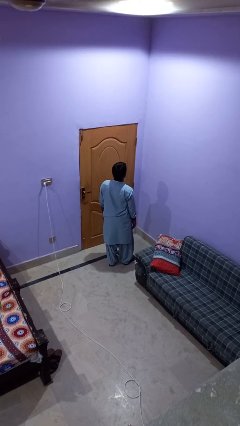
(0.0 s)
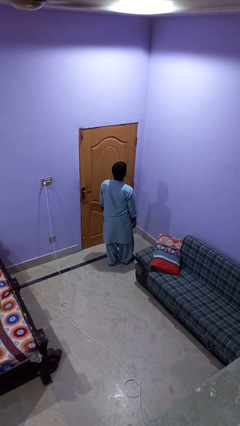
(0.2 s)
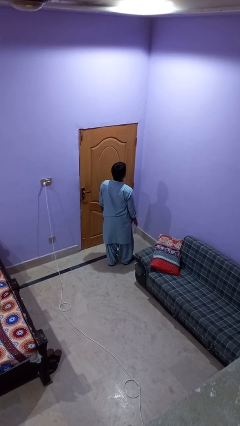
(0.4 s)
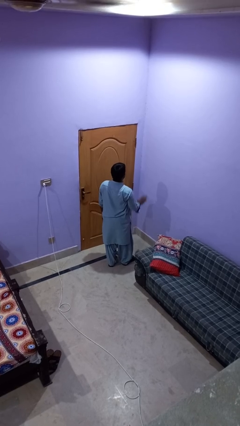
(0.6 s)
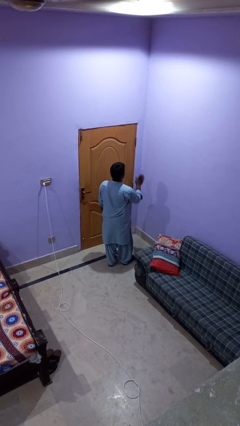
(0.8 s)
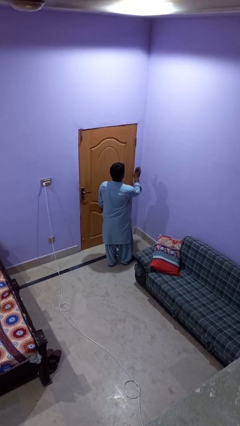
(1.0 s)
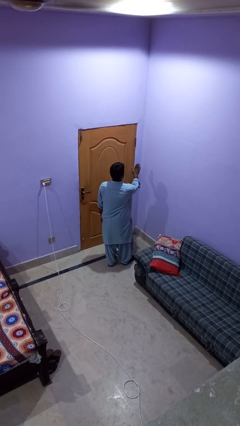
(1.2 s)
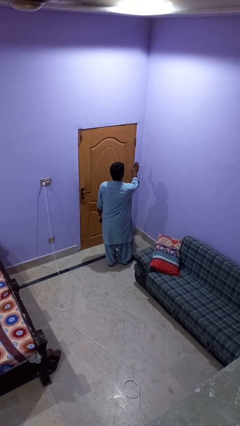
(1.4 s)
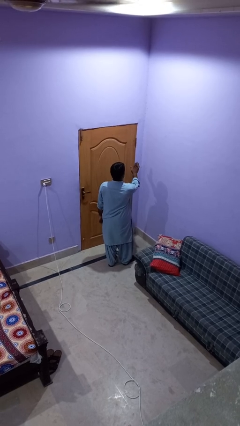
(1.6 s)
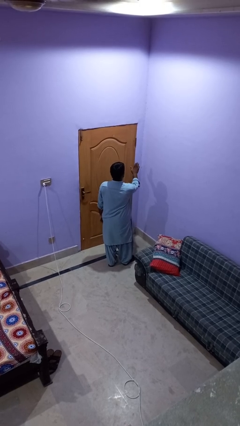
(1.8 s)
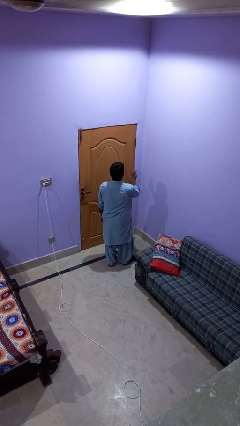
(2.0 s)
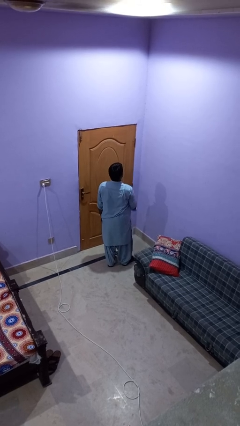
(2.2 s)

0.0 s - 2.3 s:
person gestures stop

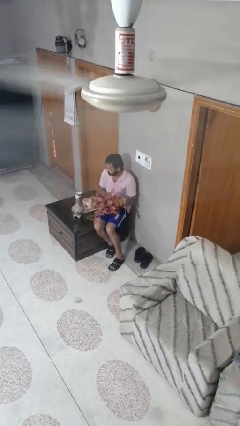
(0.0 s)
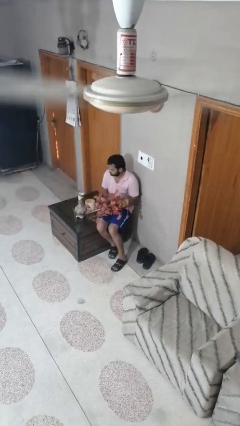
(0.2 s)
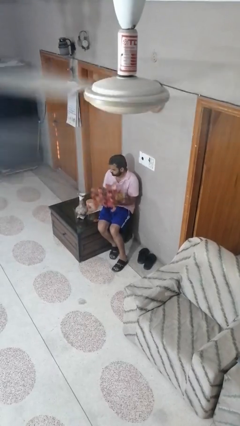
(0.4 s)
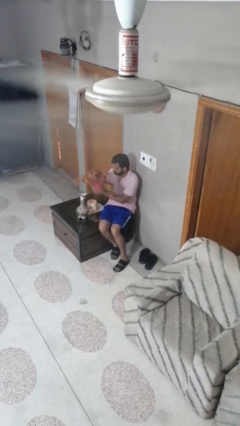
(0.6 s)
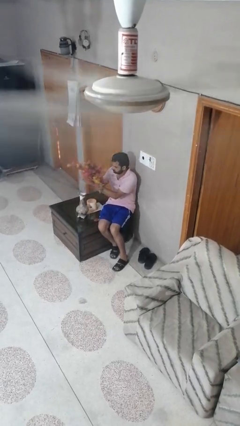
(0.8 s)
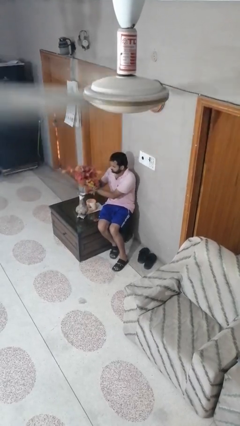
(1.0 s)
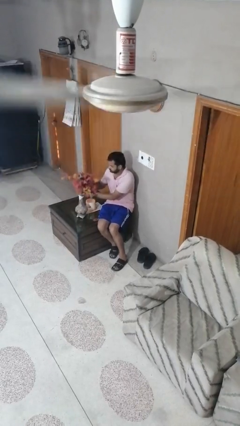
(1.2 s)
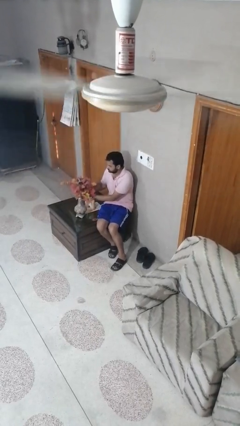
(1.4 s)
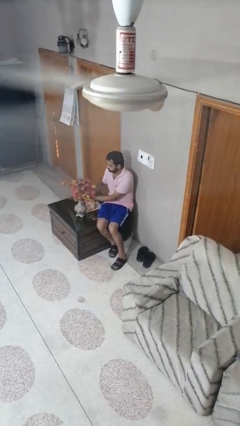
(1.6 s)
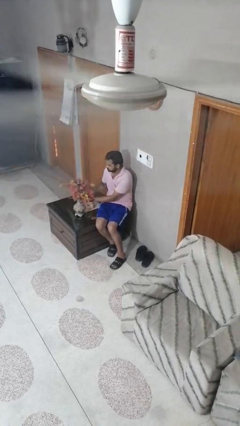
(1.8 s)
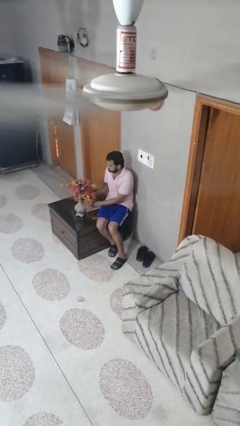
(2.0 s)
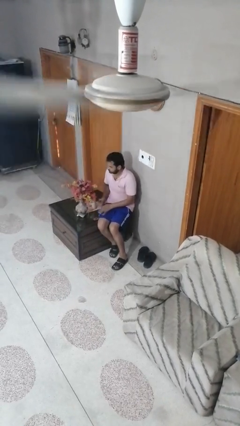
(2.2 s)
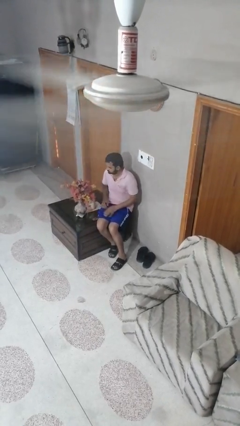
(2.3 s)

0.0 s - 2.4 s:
person arranges flowers in vase

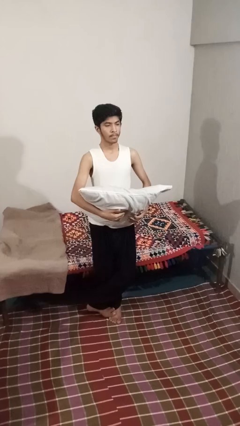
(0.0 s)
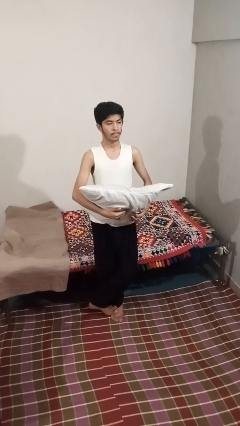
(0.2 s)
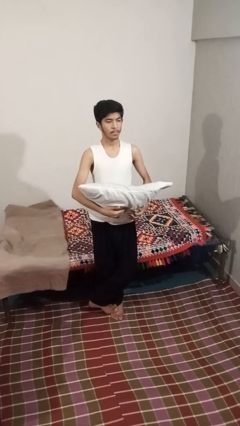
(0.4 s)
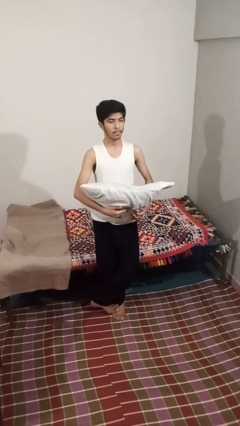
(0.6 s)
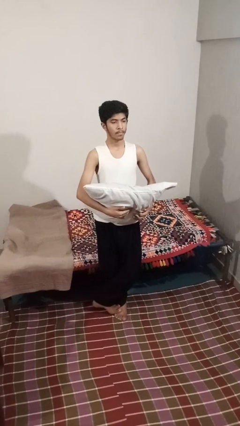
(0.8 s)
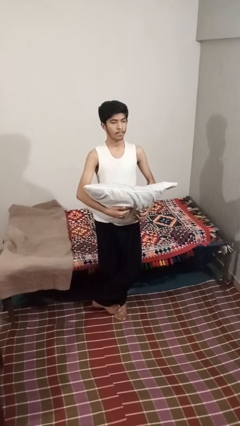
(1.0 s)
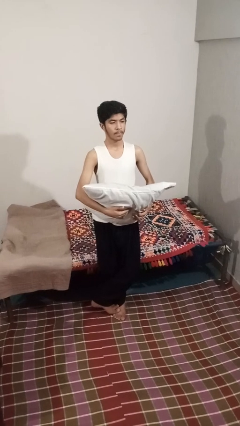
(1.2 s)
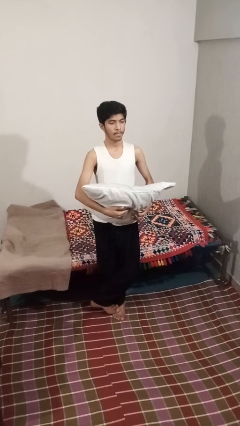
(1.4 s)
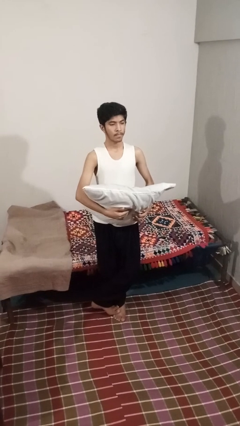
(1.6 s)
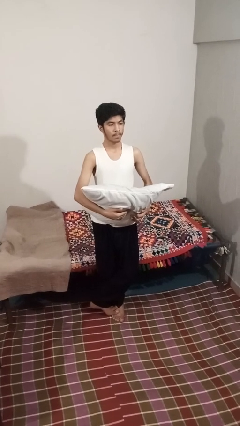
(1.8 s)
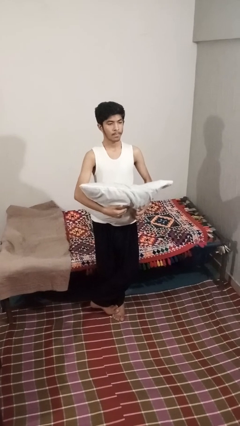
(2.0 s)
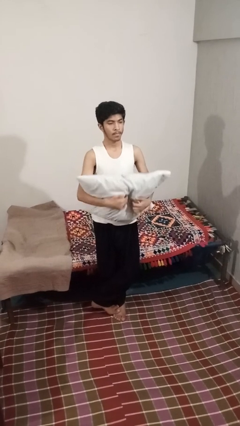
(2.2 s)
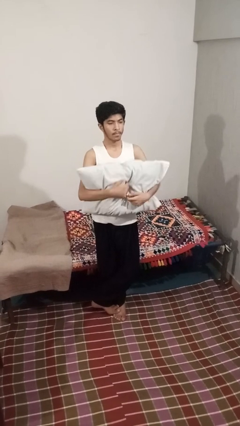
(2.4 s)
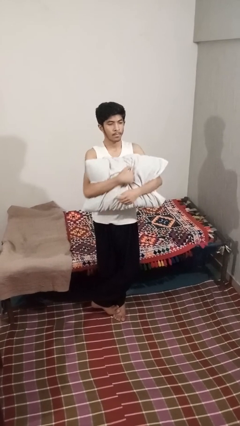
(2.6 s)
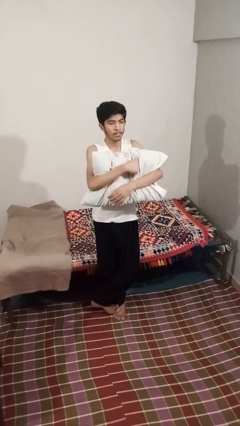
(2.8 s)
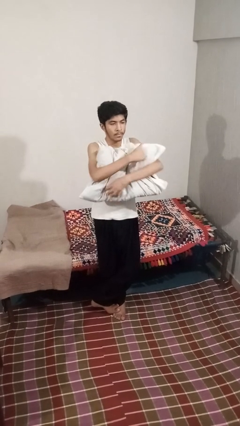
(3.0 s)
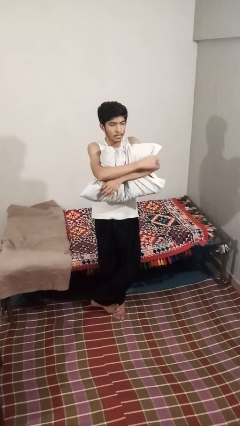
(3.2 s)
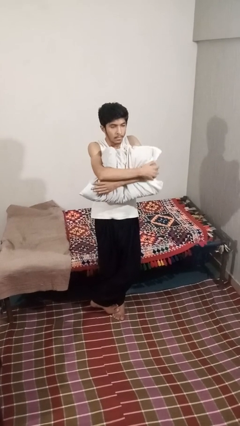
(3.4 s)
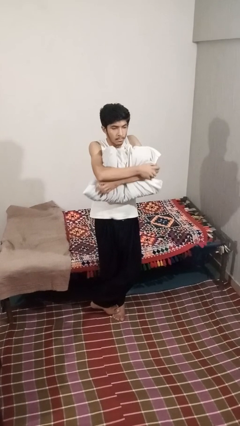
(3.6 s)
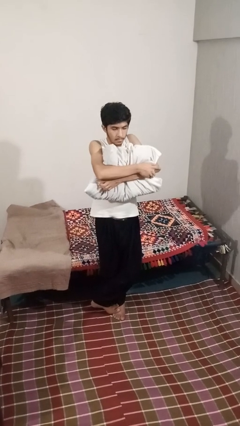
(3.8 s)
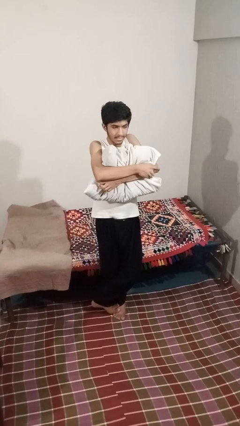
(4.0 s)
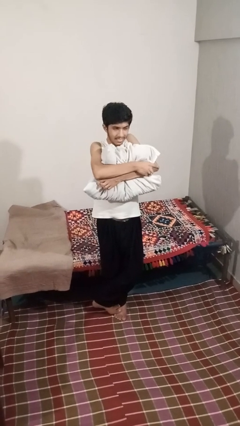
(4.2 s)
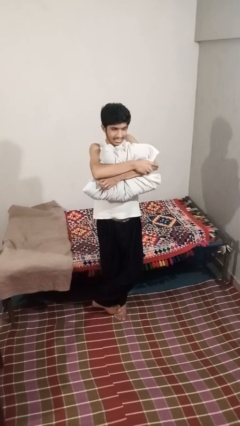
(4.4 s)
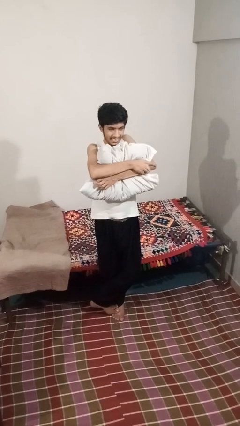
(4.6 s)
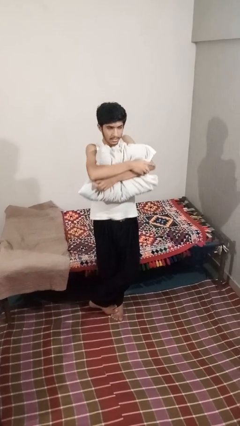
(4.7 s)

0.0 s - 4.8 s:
person squeezes object

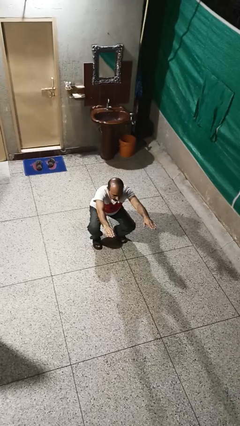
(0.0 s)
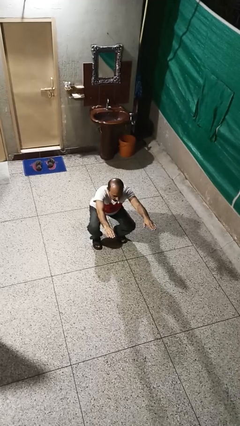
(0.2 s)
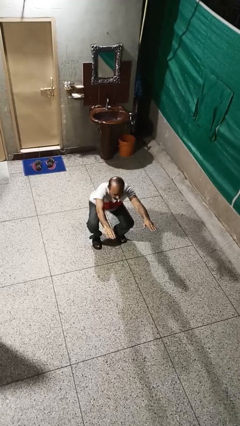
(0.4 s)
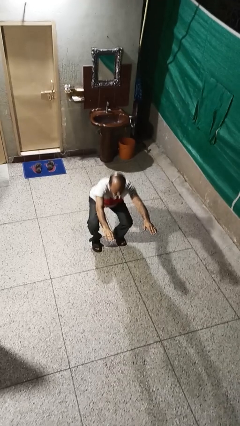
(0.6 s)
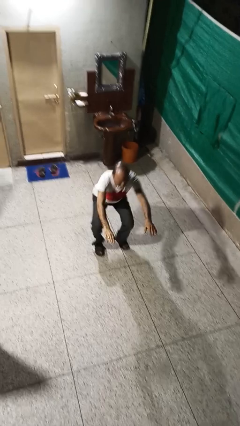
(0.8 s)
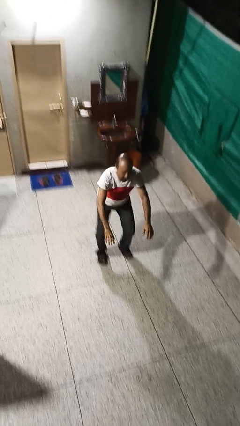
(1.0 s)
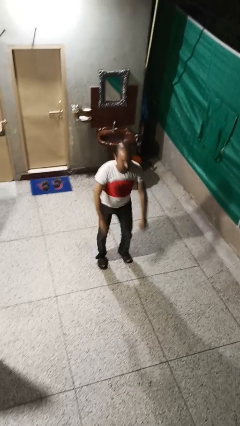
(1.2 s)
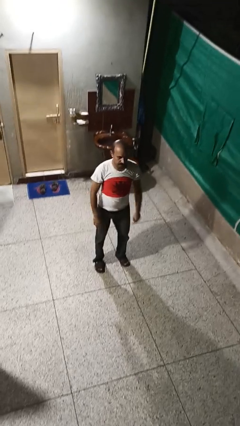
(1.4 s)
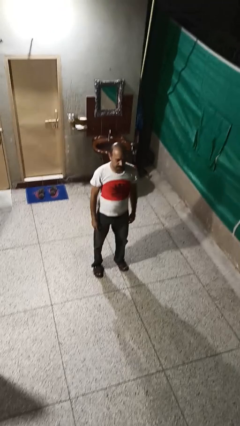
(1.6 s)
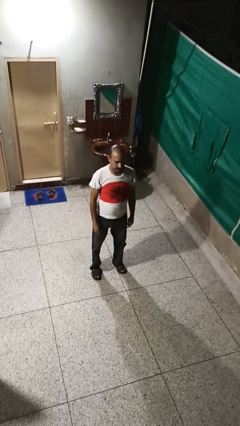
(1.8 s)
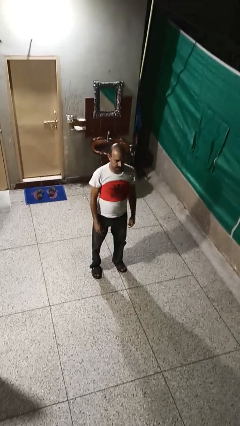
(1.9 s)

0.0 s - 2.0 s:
person stands up

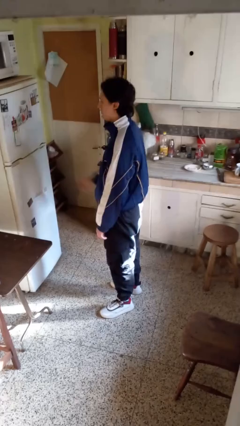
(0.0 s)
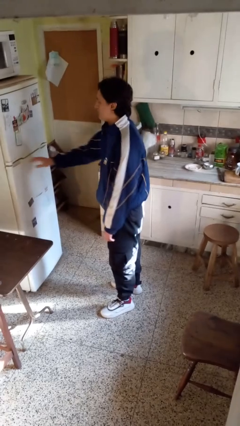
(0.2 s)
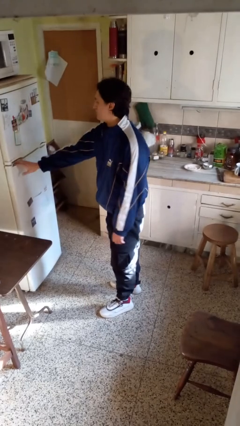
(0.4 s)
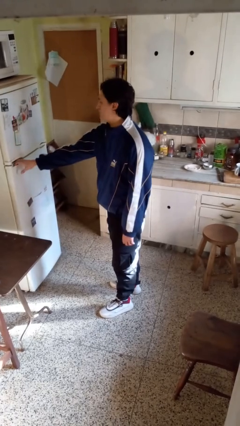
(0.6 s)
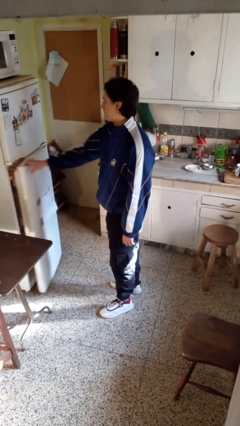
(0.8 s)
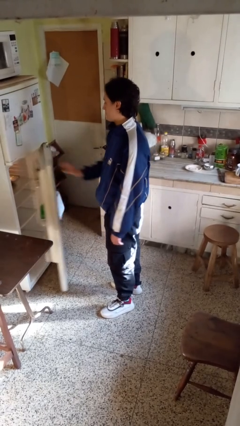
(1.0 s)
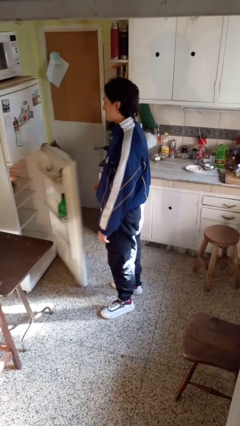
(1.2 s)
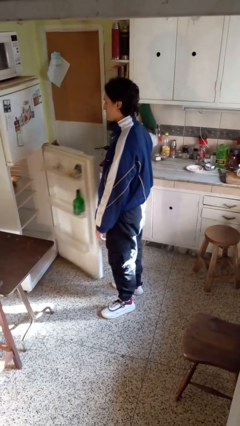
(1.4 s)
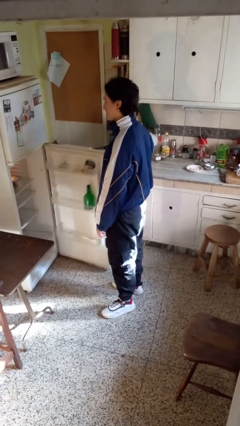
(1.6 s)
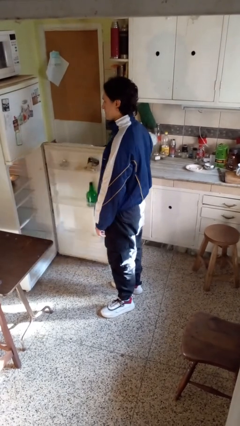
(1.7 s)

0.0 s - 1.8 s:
person opens refrigerator

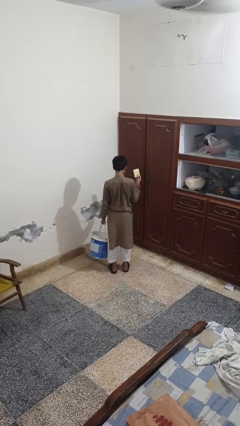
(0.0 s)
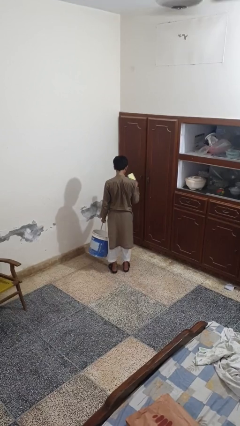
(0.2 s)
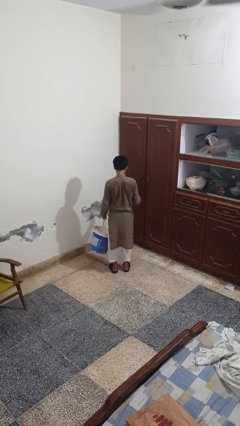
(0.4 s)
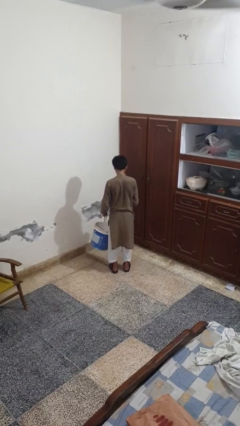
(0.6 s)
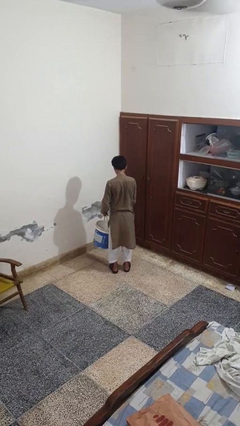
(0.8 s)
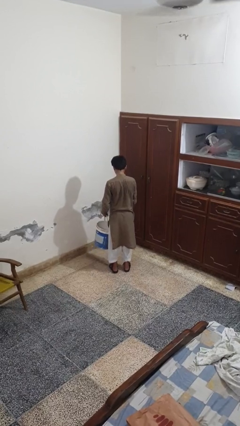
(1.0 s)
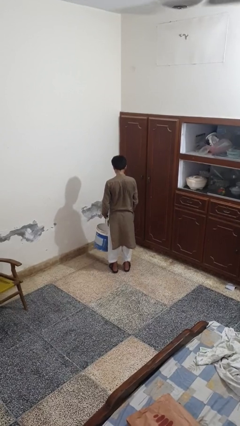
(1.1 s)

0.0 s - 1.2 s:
person puts object into basket

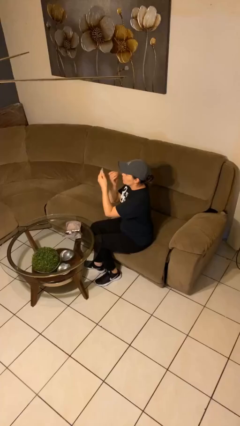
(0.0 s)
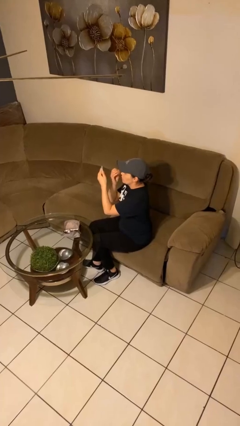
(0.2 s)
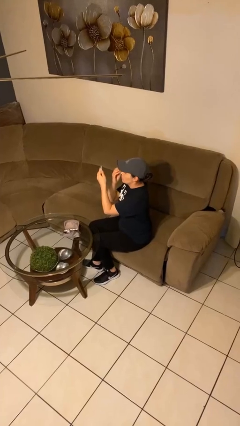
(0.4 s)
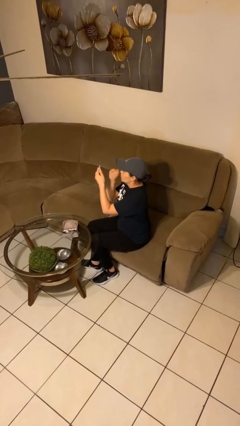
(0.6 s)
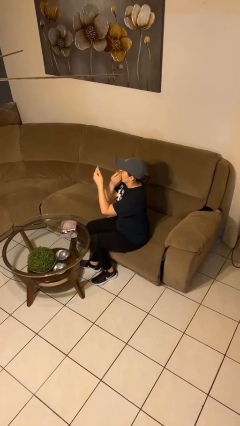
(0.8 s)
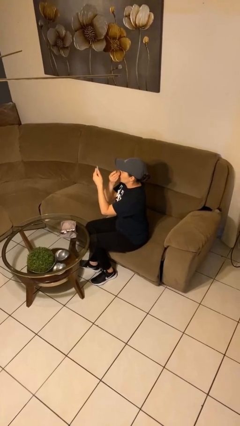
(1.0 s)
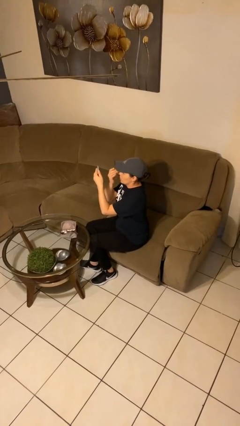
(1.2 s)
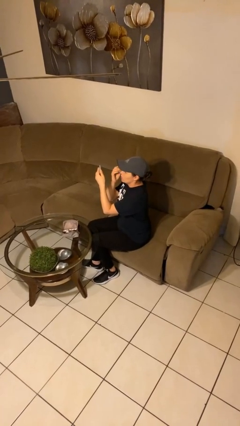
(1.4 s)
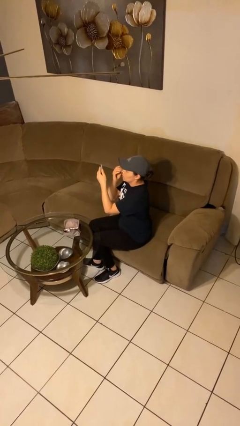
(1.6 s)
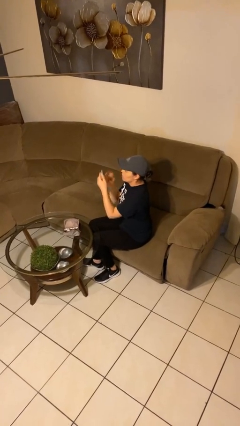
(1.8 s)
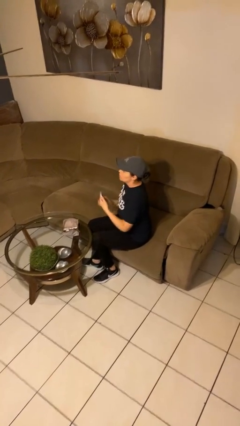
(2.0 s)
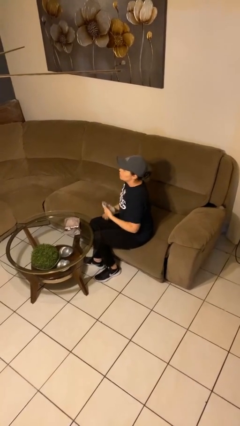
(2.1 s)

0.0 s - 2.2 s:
person applies foundation makeup

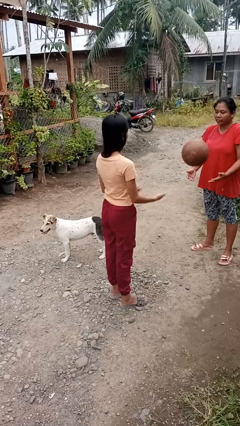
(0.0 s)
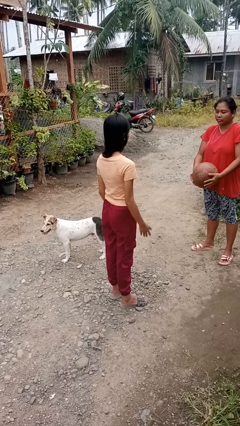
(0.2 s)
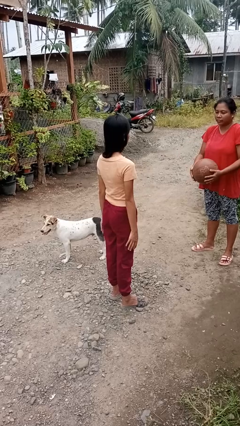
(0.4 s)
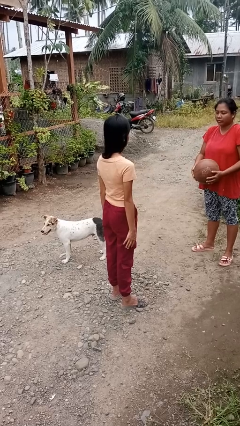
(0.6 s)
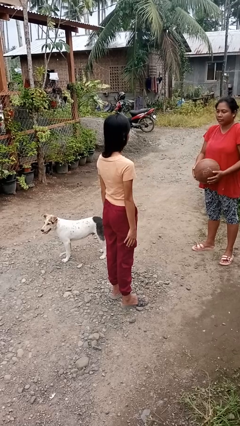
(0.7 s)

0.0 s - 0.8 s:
person throws object to person
